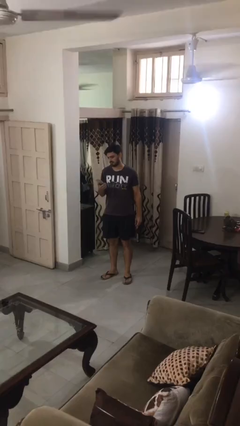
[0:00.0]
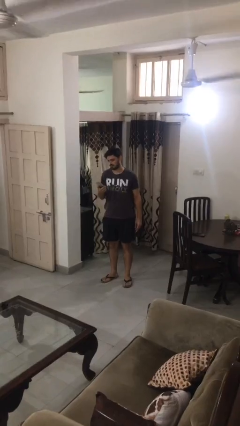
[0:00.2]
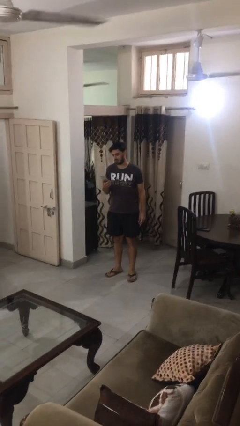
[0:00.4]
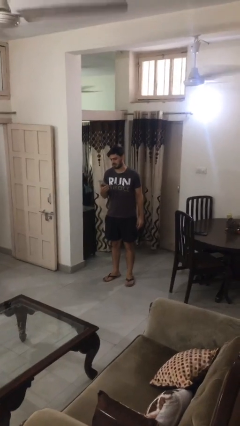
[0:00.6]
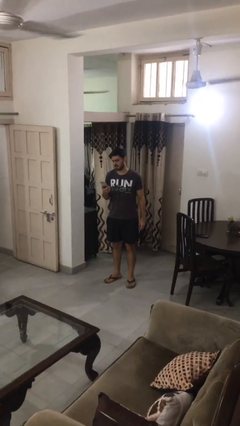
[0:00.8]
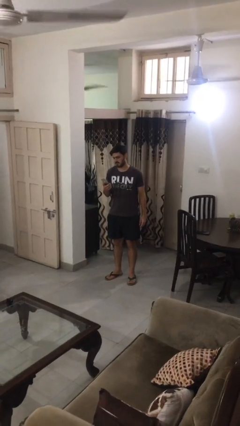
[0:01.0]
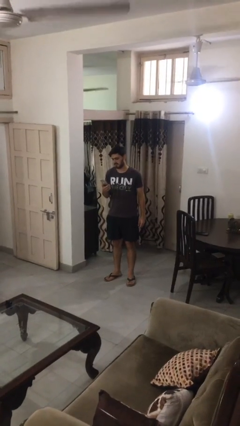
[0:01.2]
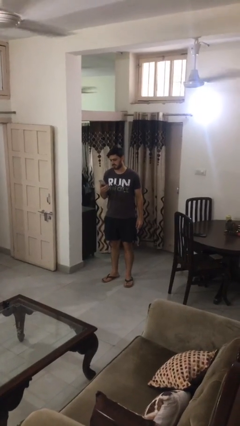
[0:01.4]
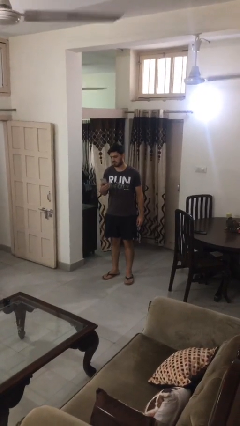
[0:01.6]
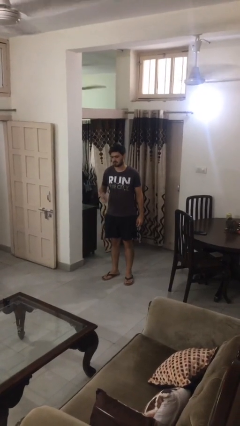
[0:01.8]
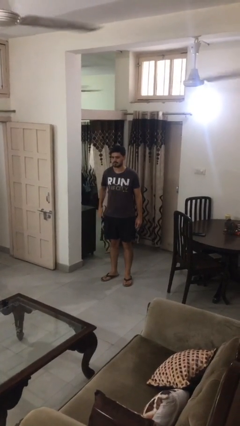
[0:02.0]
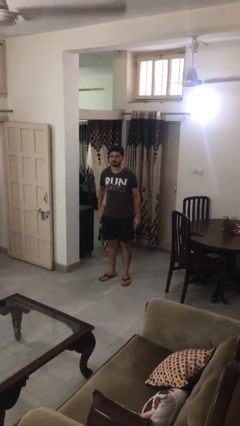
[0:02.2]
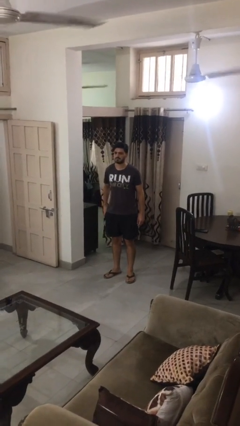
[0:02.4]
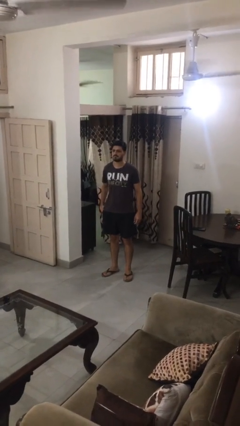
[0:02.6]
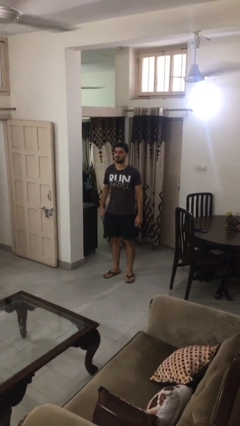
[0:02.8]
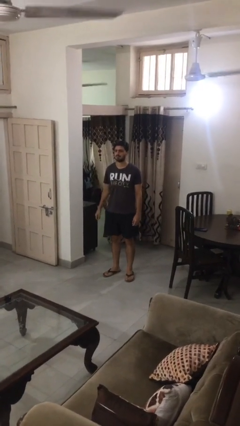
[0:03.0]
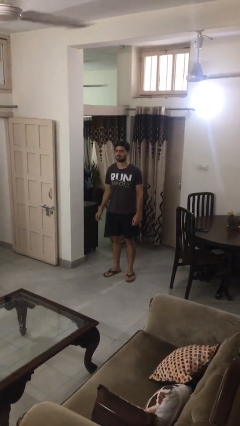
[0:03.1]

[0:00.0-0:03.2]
person puts phone into pocket

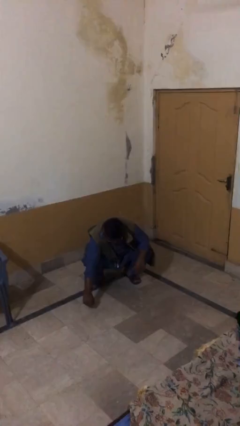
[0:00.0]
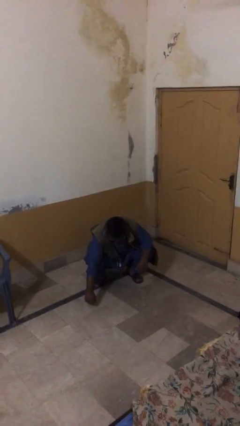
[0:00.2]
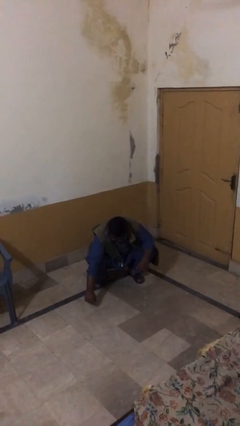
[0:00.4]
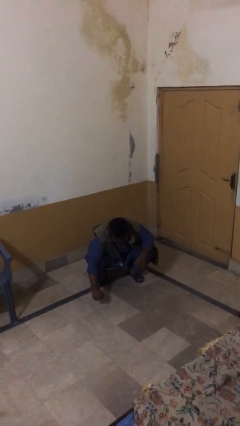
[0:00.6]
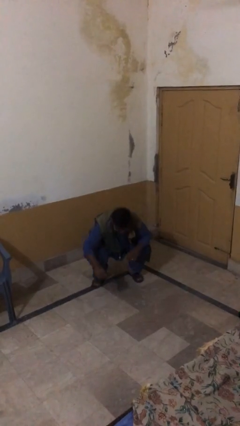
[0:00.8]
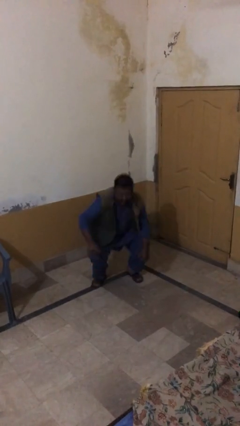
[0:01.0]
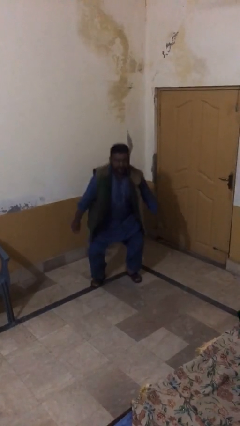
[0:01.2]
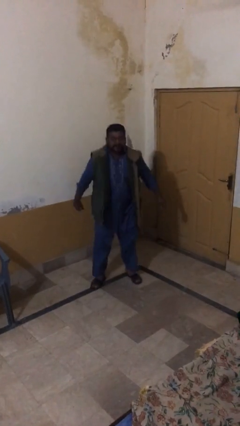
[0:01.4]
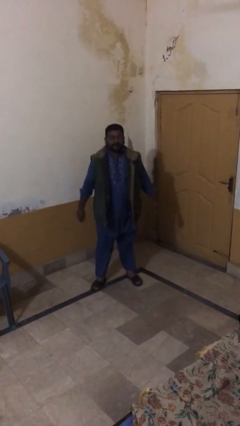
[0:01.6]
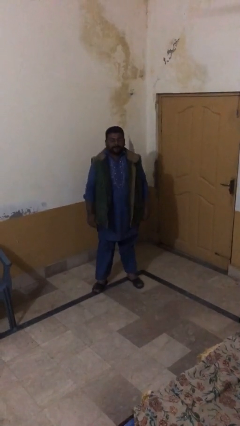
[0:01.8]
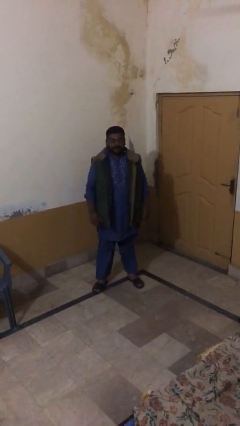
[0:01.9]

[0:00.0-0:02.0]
person stands up

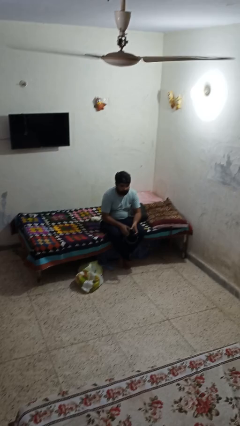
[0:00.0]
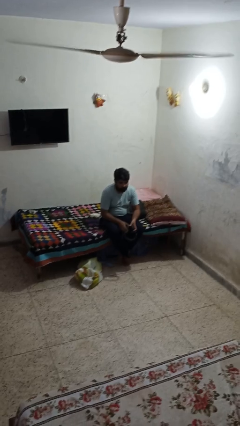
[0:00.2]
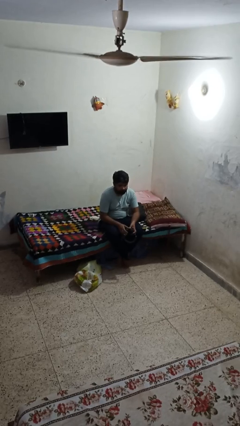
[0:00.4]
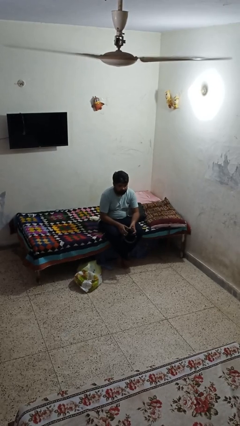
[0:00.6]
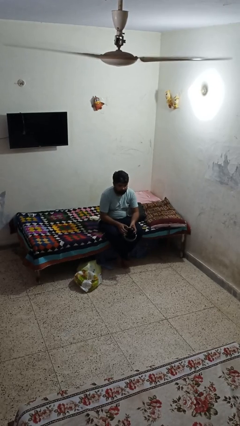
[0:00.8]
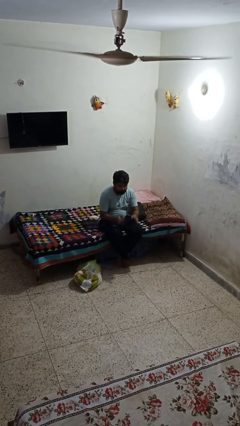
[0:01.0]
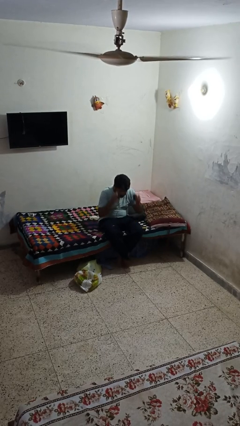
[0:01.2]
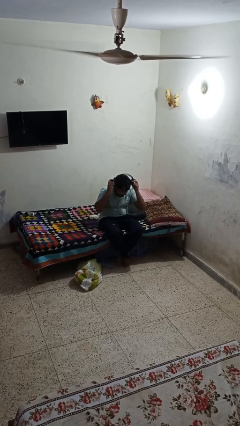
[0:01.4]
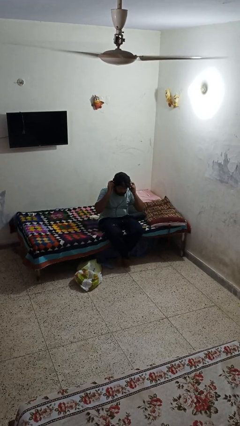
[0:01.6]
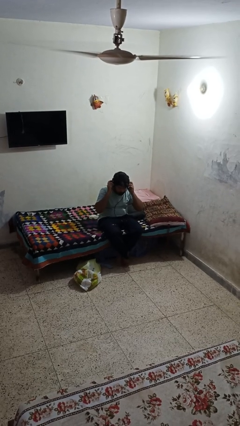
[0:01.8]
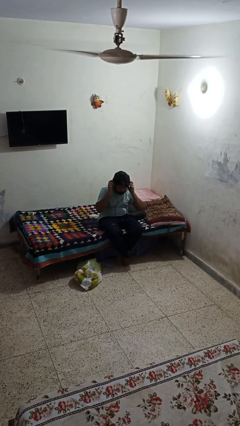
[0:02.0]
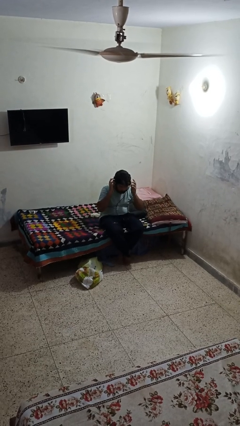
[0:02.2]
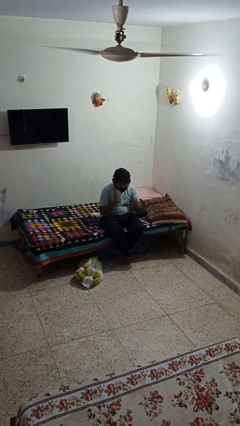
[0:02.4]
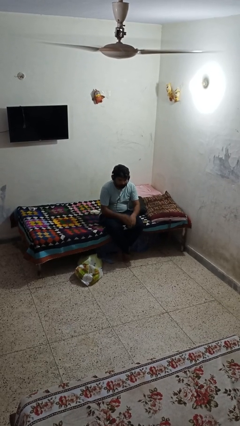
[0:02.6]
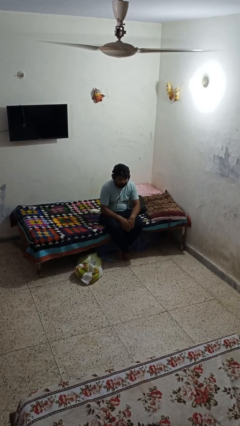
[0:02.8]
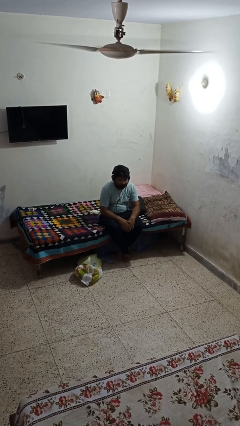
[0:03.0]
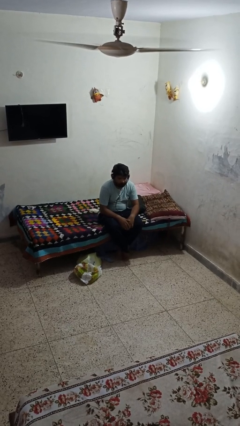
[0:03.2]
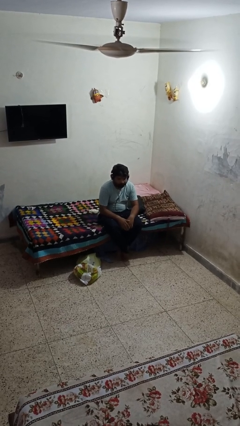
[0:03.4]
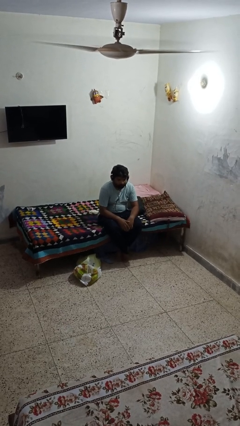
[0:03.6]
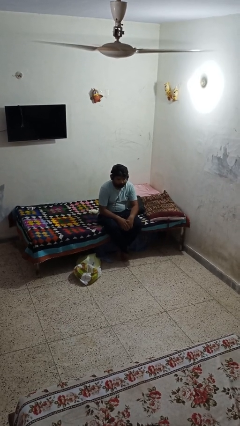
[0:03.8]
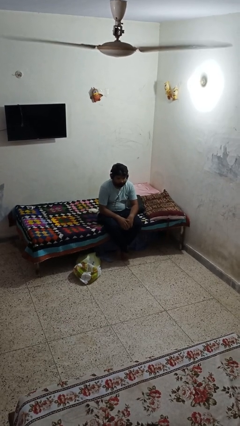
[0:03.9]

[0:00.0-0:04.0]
person puts on headphones

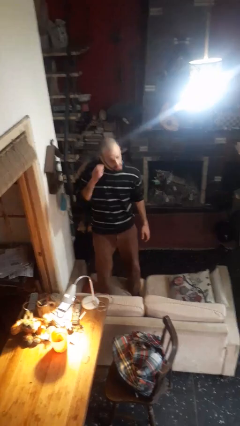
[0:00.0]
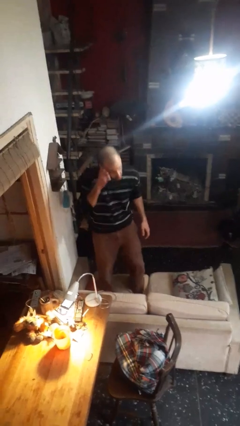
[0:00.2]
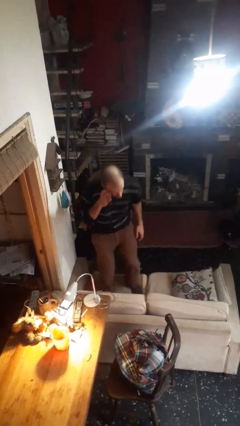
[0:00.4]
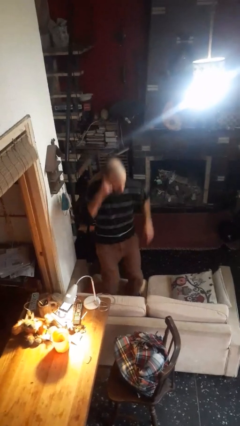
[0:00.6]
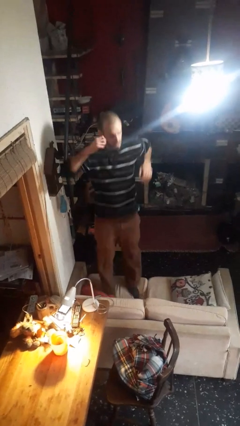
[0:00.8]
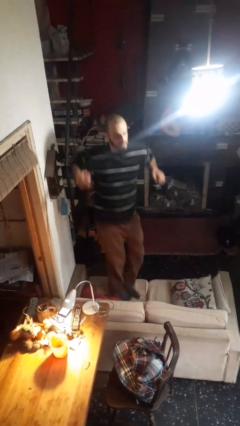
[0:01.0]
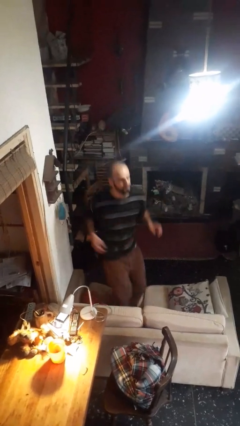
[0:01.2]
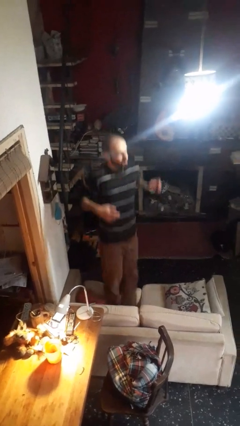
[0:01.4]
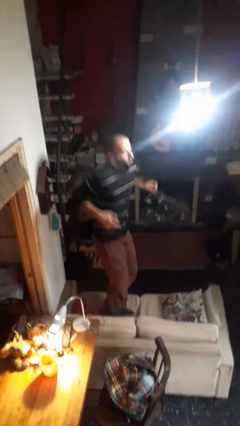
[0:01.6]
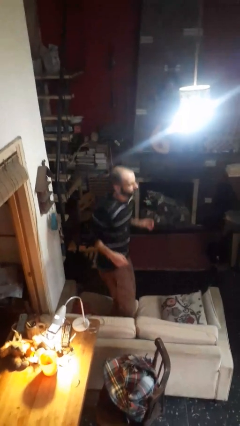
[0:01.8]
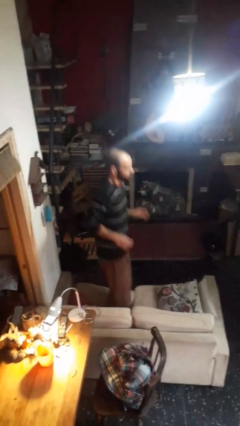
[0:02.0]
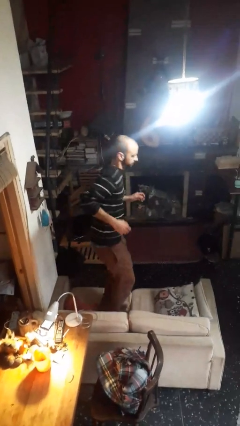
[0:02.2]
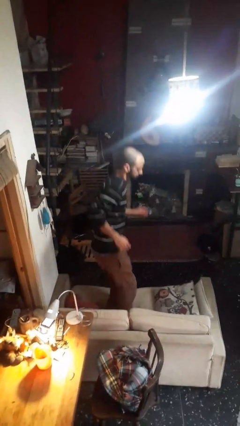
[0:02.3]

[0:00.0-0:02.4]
person jumps on couch

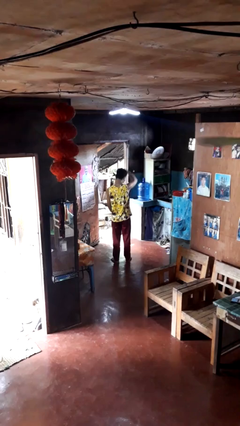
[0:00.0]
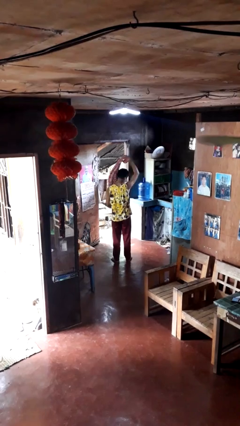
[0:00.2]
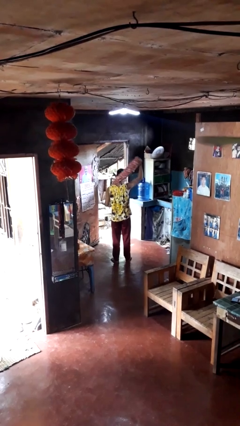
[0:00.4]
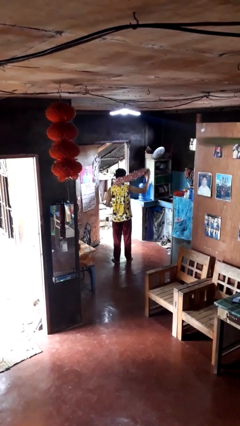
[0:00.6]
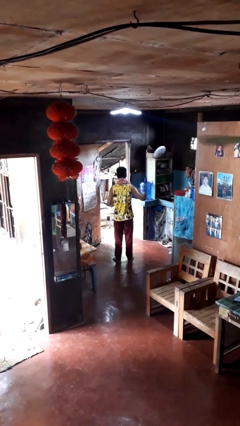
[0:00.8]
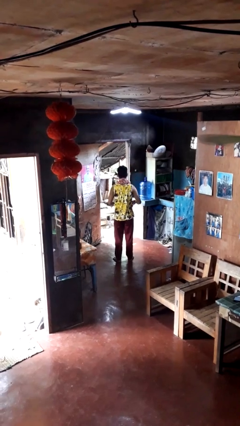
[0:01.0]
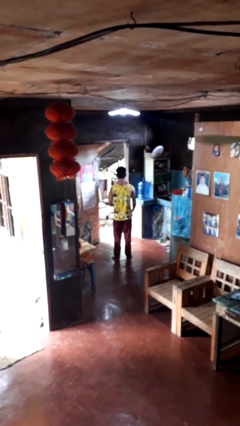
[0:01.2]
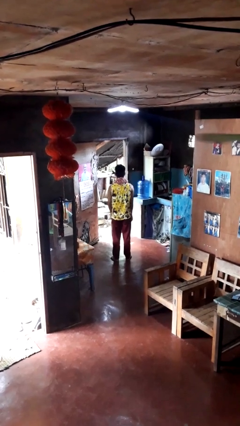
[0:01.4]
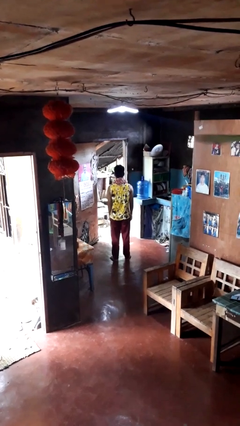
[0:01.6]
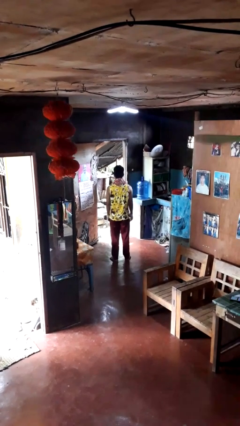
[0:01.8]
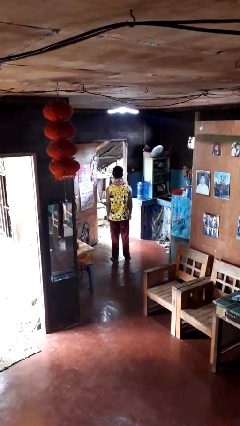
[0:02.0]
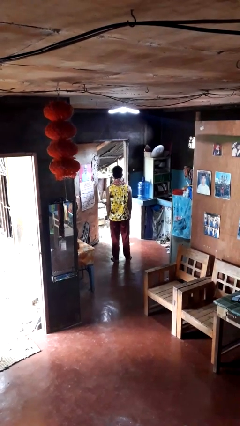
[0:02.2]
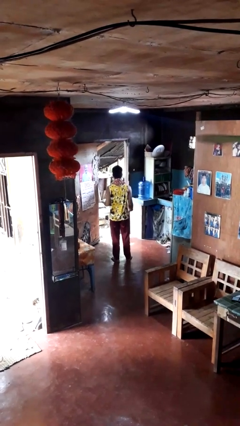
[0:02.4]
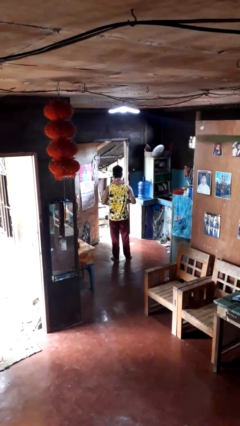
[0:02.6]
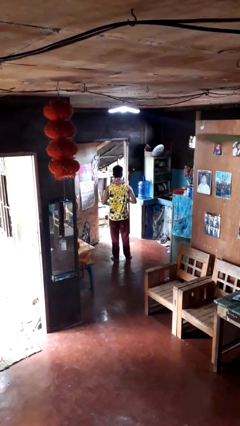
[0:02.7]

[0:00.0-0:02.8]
person puts on scarf

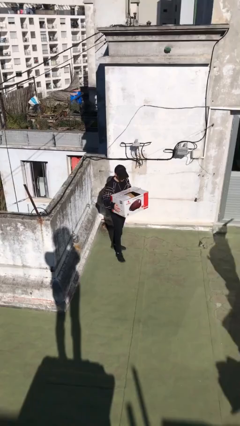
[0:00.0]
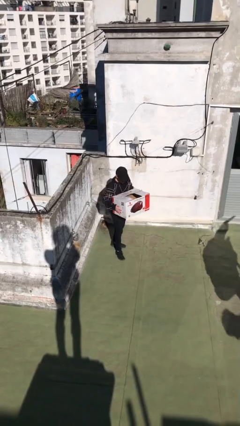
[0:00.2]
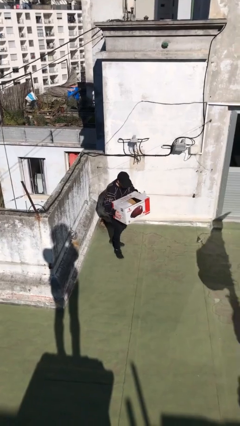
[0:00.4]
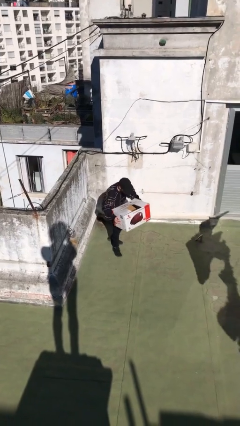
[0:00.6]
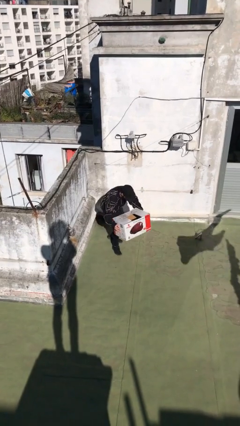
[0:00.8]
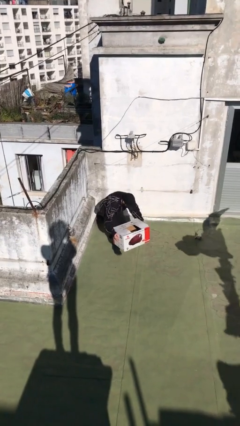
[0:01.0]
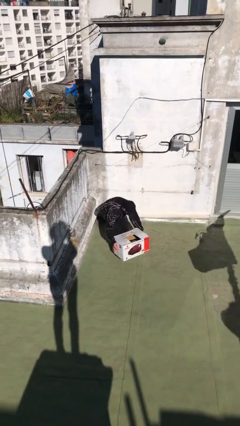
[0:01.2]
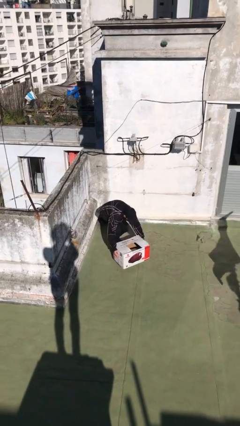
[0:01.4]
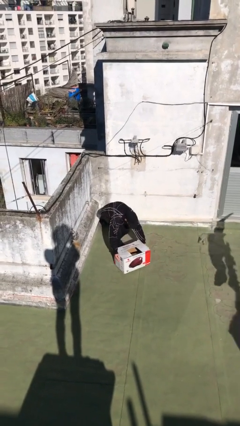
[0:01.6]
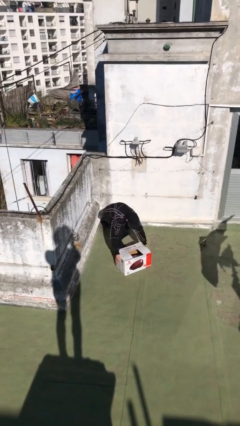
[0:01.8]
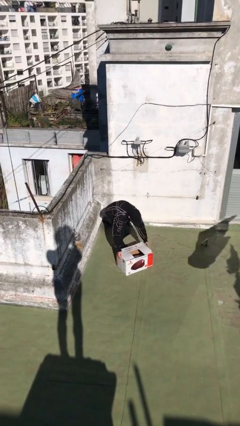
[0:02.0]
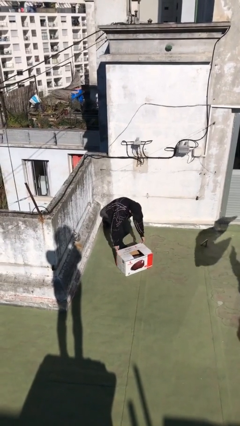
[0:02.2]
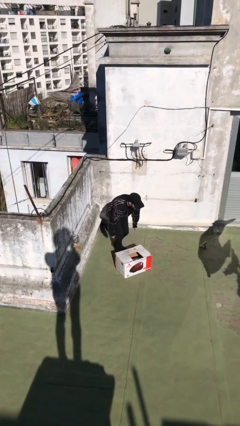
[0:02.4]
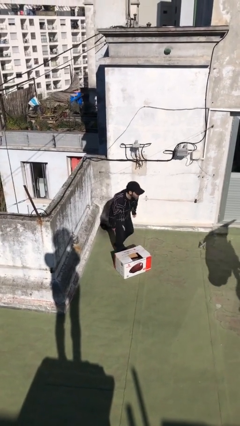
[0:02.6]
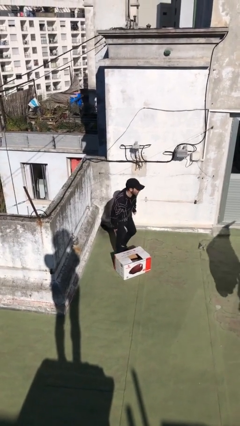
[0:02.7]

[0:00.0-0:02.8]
person puts down object on floor

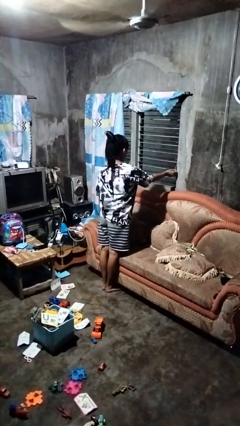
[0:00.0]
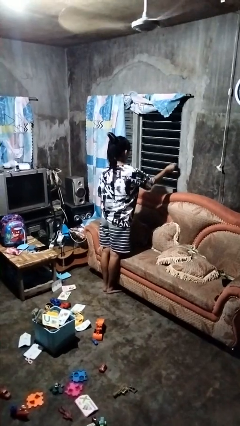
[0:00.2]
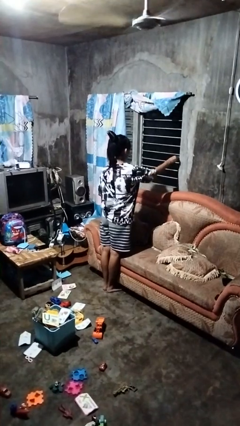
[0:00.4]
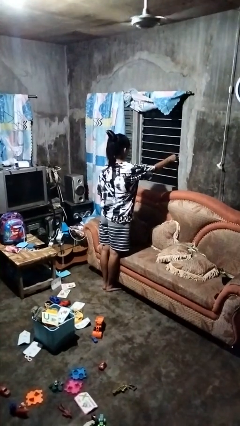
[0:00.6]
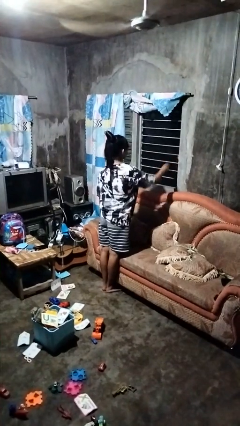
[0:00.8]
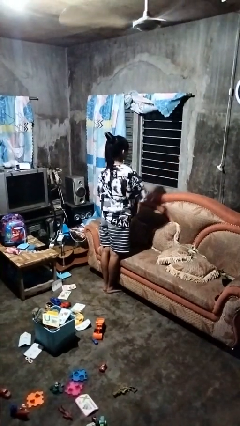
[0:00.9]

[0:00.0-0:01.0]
person closes home window
